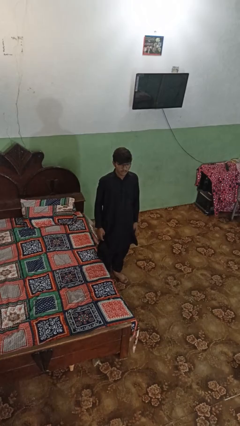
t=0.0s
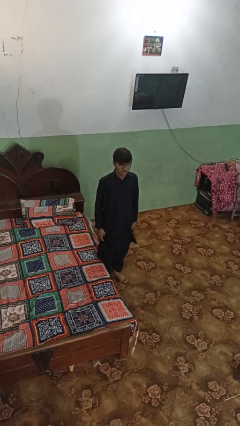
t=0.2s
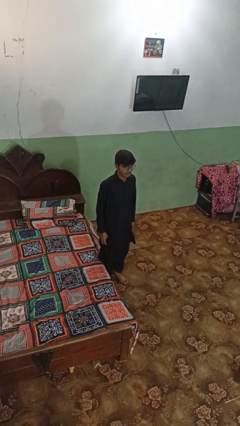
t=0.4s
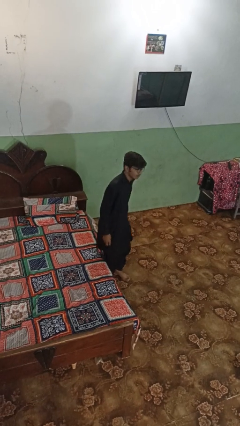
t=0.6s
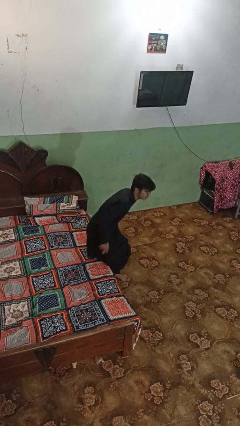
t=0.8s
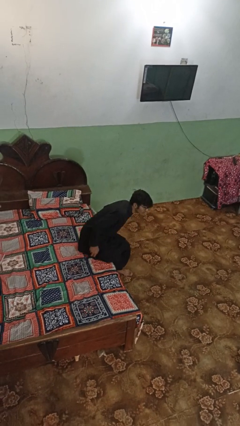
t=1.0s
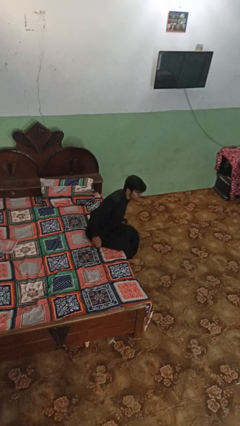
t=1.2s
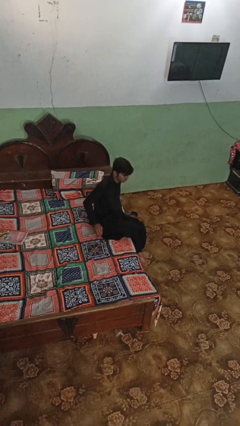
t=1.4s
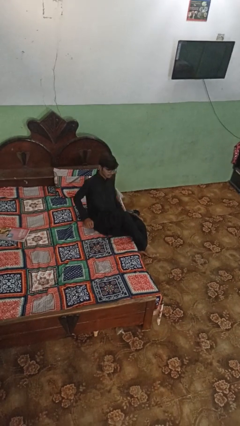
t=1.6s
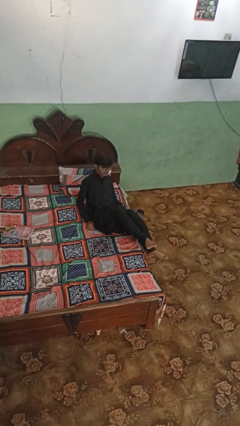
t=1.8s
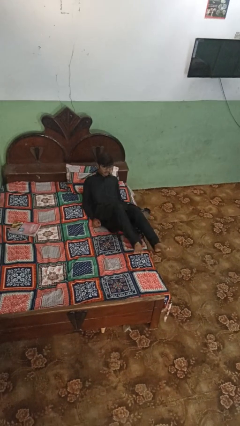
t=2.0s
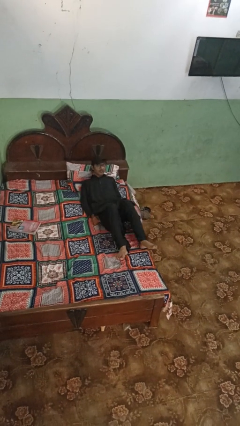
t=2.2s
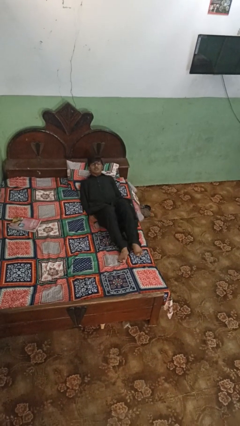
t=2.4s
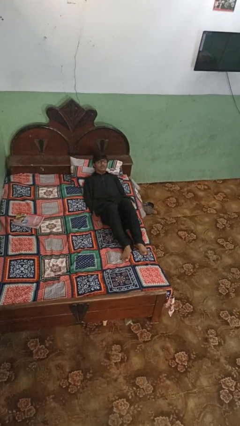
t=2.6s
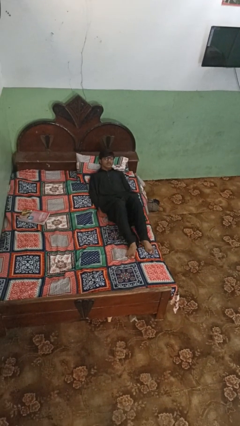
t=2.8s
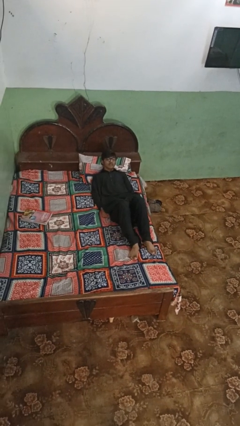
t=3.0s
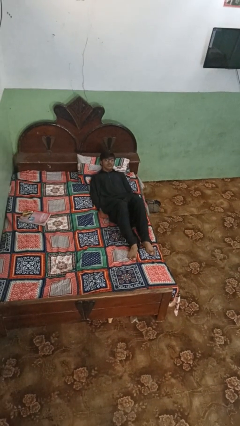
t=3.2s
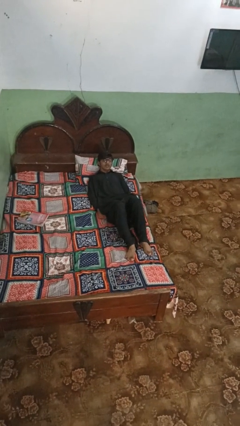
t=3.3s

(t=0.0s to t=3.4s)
person lies down on bed

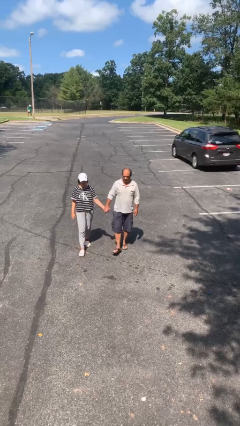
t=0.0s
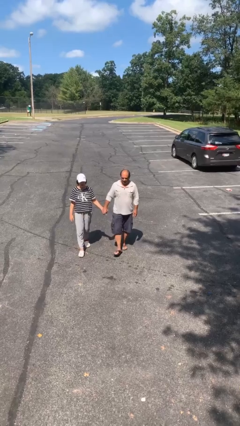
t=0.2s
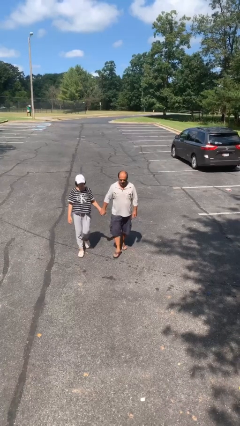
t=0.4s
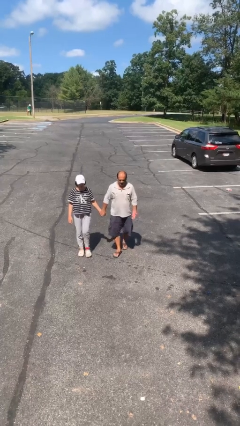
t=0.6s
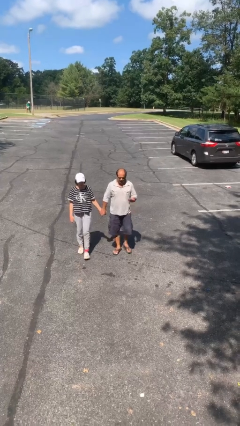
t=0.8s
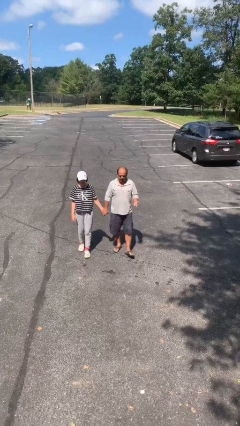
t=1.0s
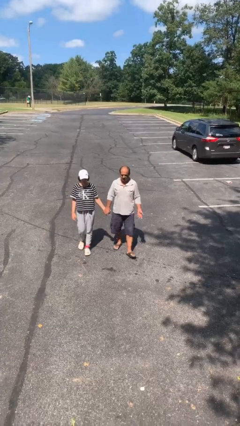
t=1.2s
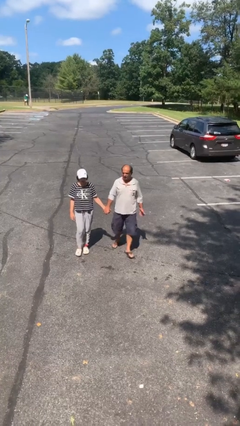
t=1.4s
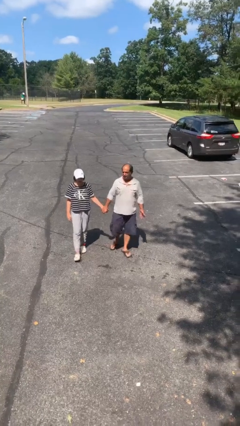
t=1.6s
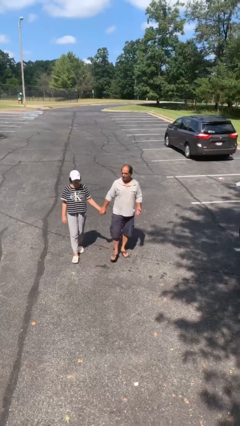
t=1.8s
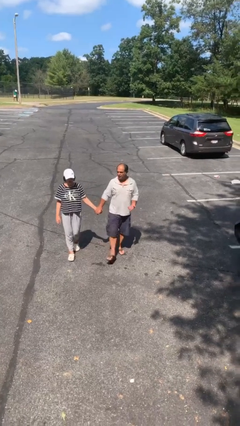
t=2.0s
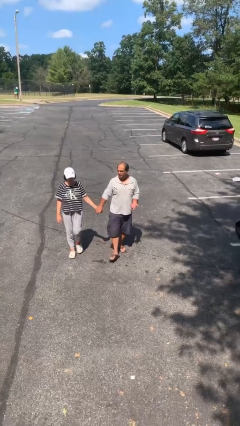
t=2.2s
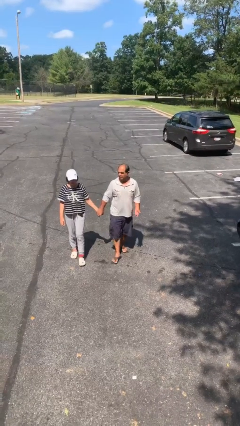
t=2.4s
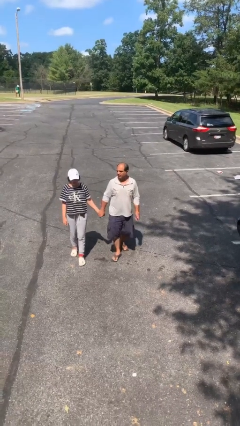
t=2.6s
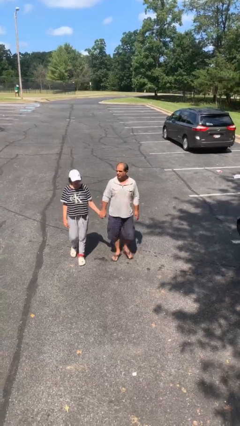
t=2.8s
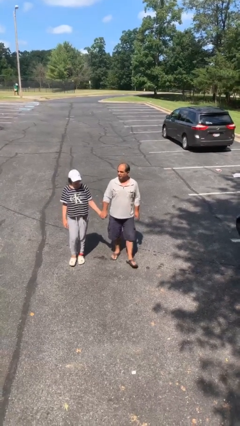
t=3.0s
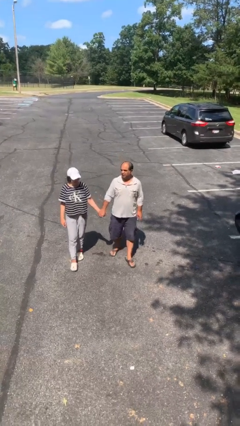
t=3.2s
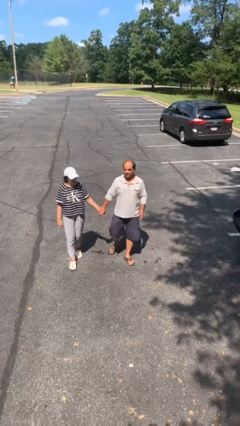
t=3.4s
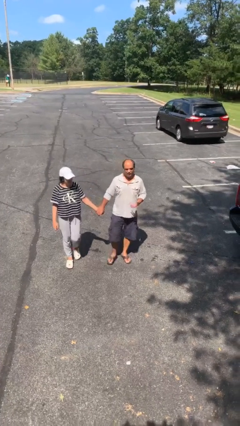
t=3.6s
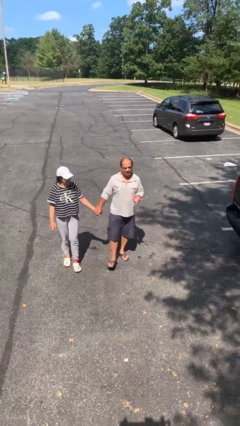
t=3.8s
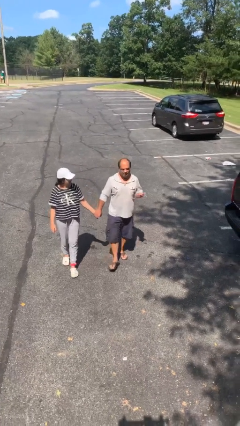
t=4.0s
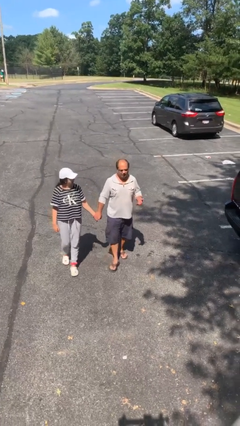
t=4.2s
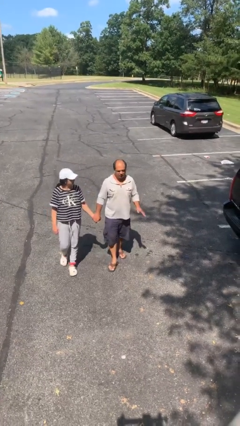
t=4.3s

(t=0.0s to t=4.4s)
person holds hand

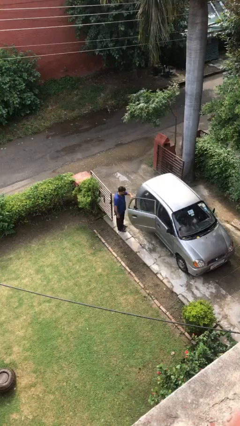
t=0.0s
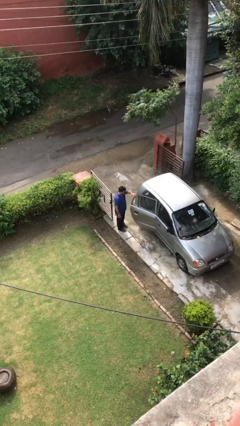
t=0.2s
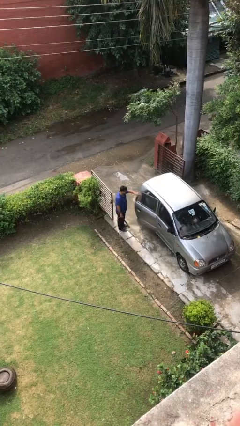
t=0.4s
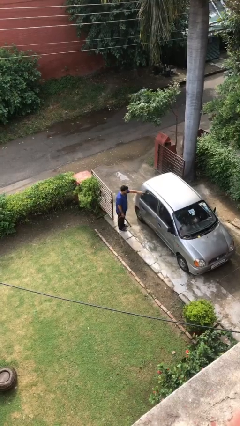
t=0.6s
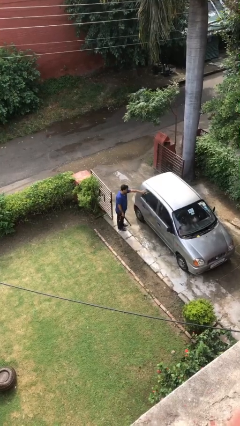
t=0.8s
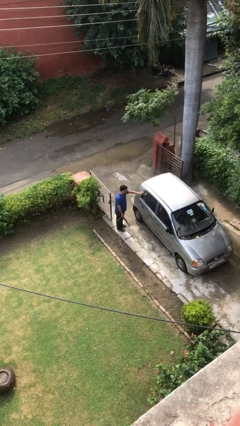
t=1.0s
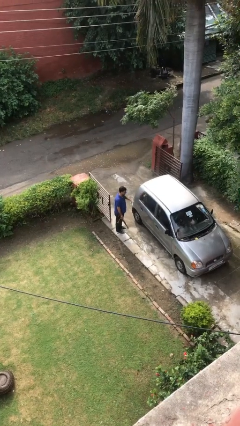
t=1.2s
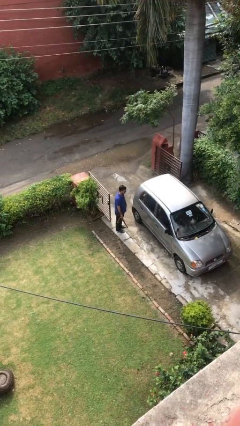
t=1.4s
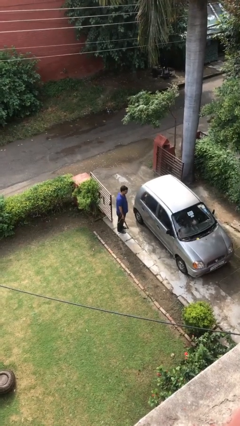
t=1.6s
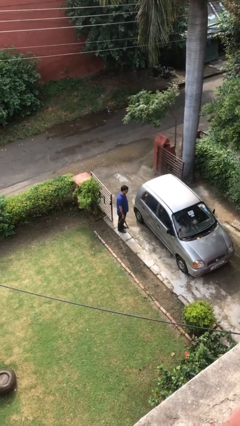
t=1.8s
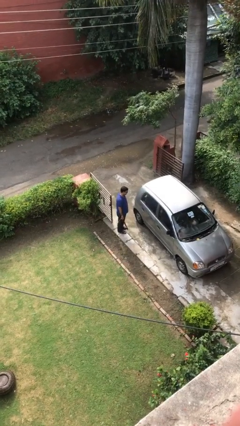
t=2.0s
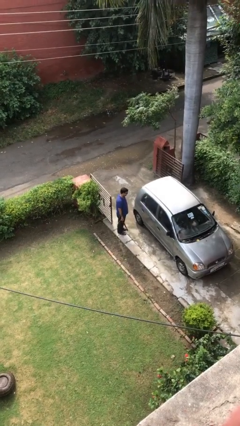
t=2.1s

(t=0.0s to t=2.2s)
person closes car door

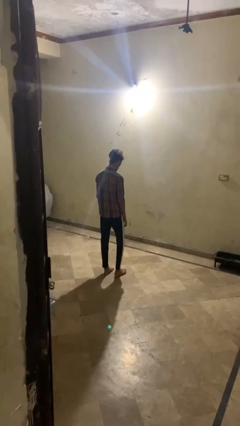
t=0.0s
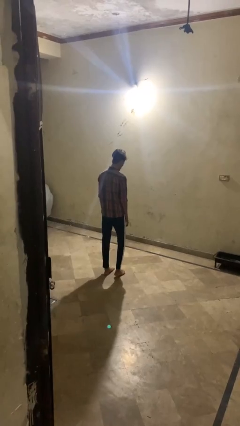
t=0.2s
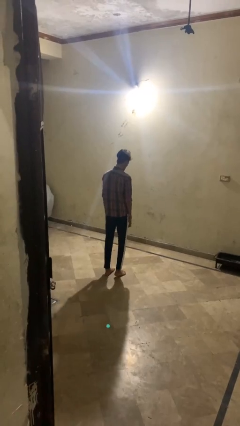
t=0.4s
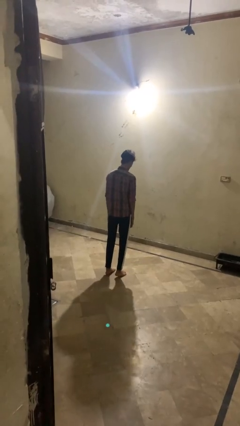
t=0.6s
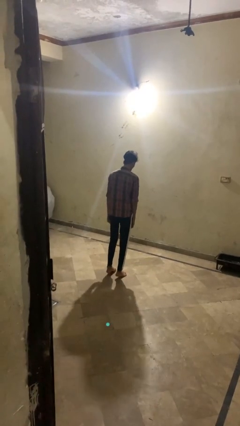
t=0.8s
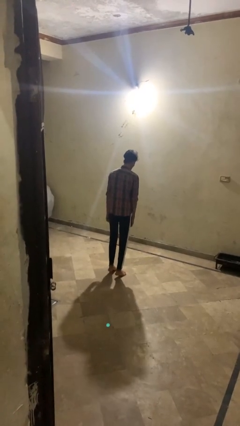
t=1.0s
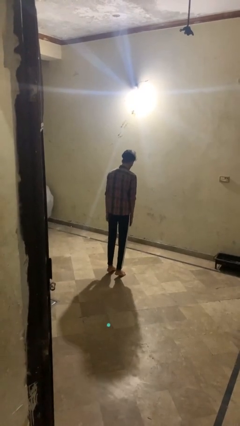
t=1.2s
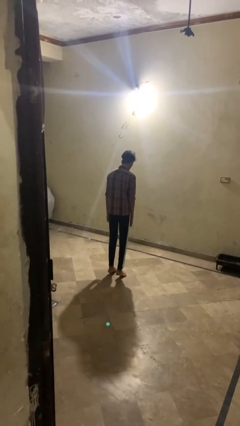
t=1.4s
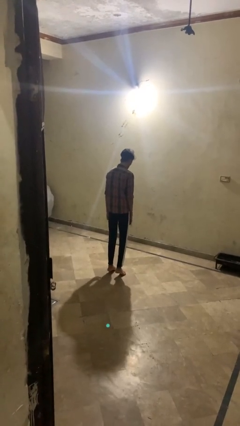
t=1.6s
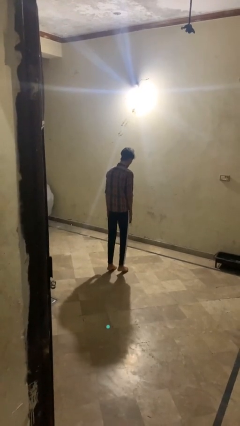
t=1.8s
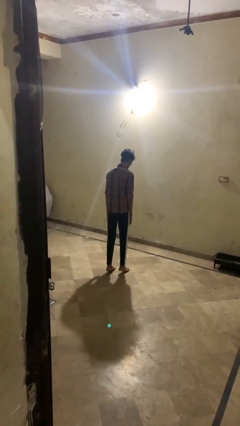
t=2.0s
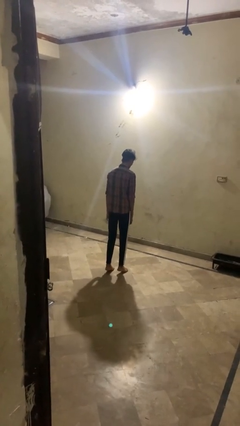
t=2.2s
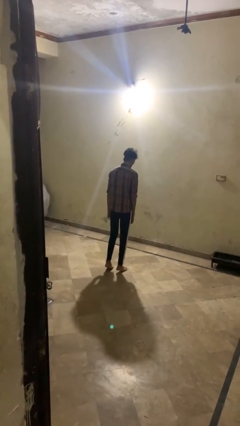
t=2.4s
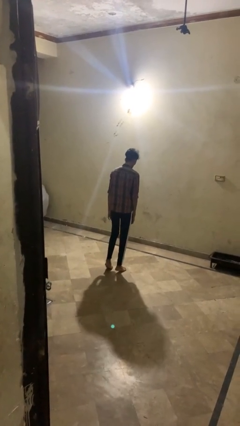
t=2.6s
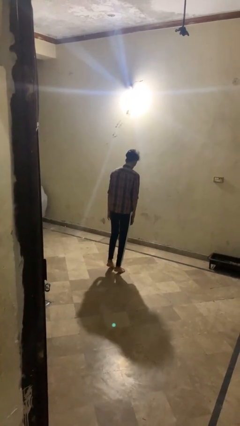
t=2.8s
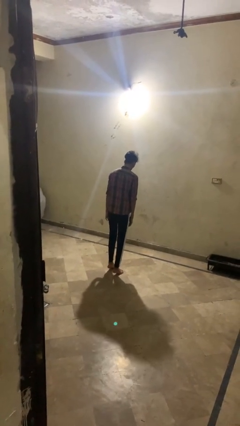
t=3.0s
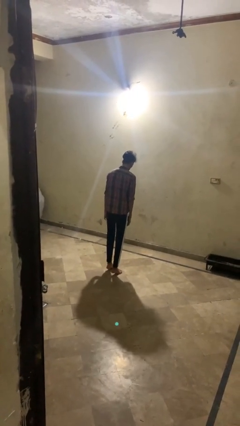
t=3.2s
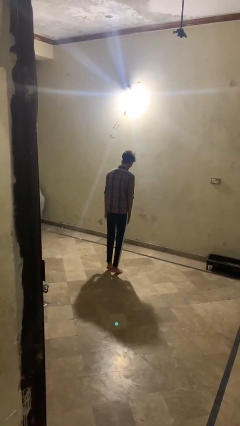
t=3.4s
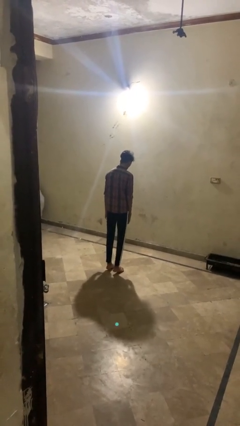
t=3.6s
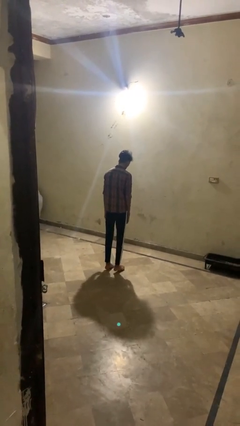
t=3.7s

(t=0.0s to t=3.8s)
person walks tiptoe

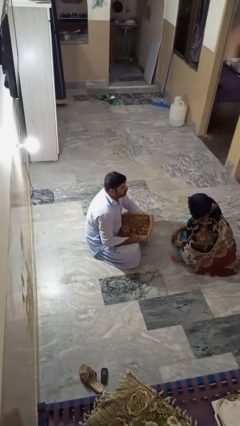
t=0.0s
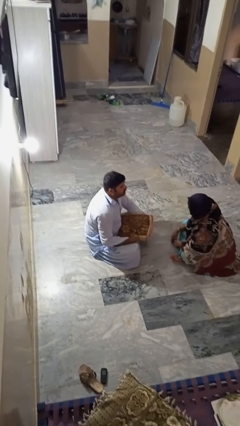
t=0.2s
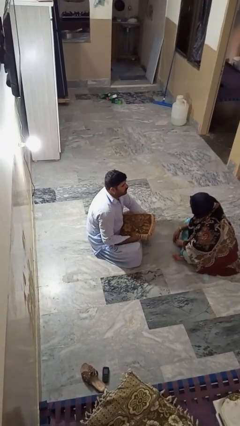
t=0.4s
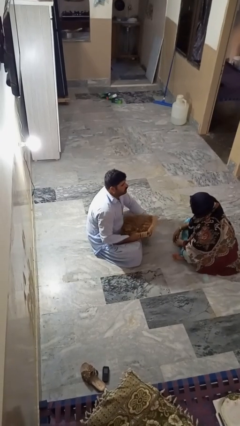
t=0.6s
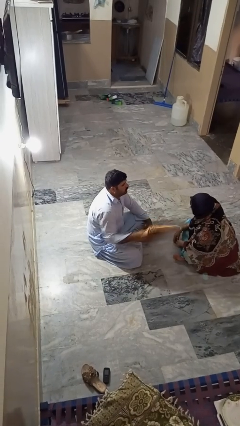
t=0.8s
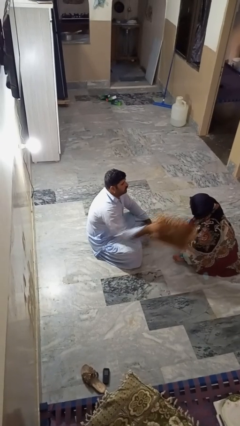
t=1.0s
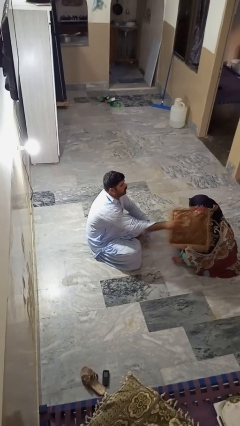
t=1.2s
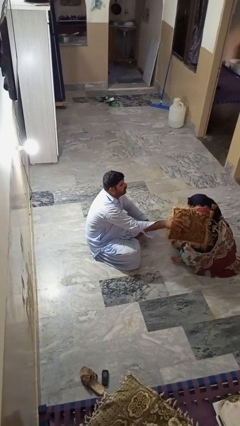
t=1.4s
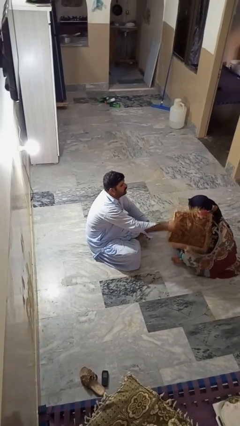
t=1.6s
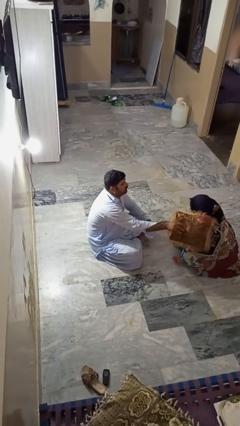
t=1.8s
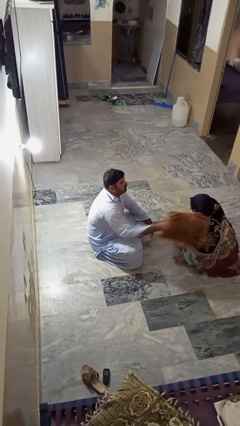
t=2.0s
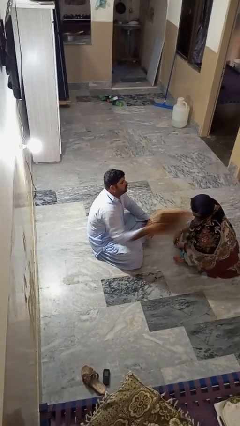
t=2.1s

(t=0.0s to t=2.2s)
person hits person with pillow

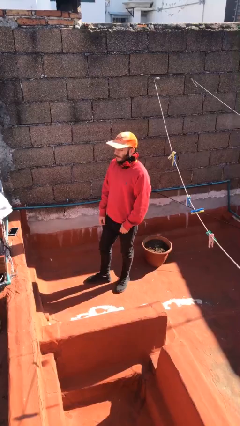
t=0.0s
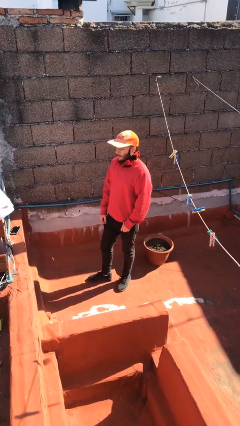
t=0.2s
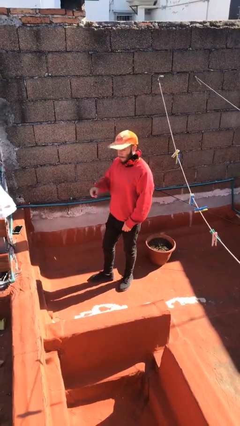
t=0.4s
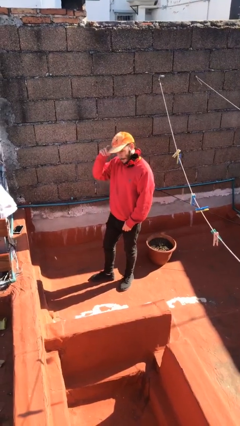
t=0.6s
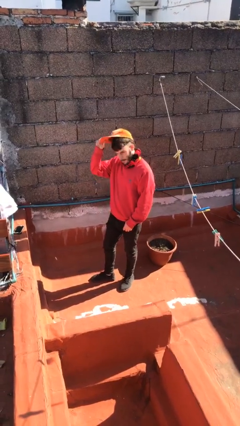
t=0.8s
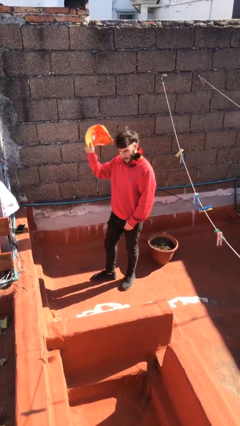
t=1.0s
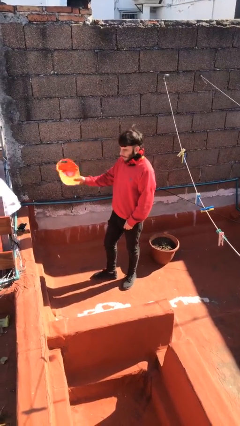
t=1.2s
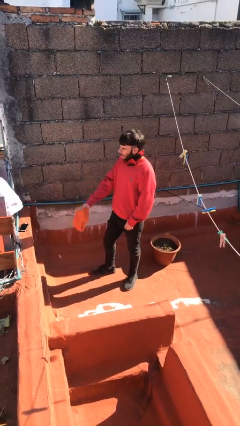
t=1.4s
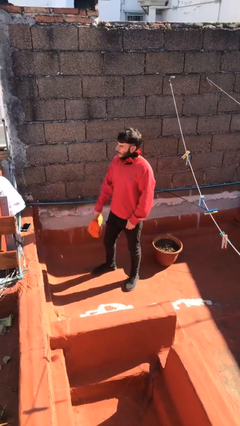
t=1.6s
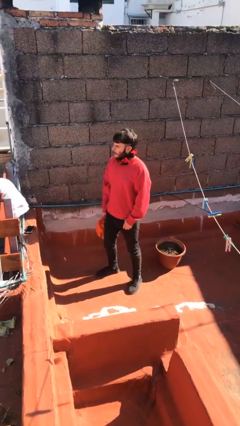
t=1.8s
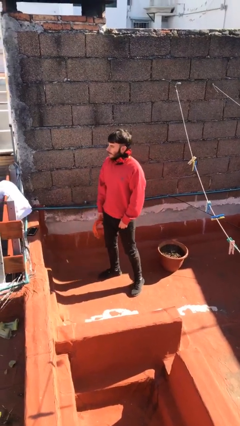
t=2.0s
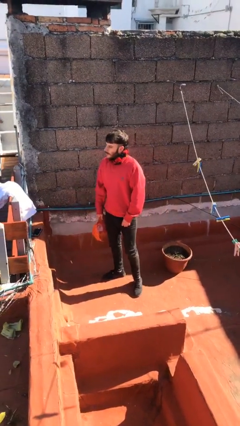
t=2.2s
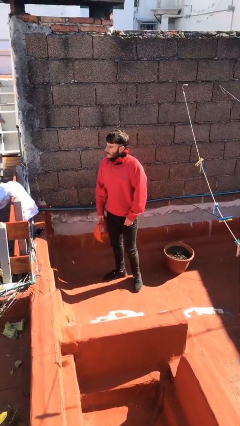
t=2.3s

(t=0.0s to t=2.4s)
person takes off hat
